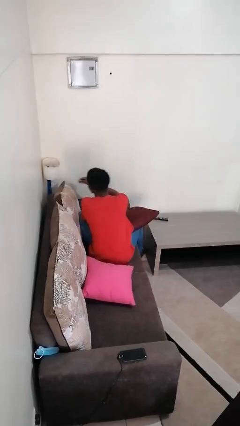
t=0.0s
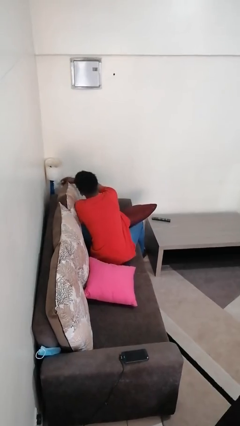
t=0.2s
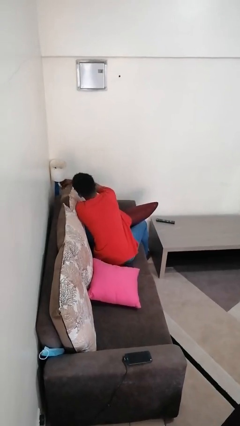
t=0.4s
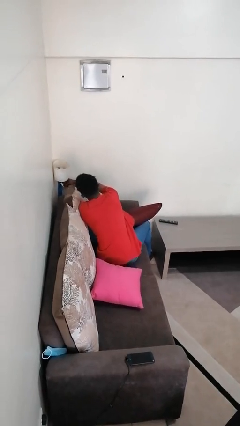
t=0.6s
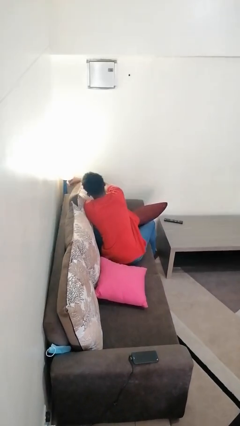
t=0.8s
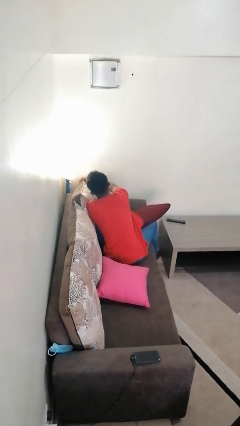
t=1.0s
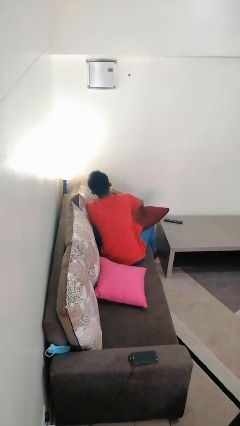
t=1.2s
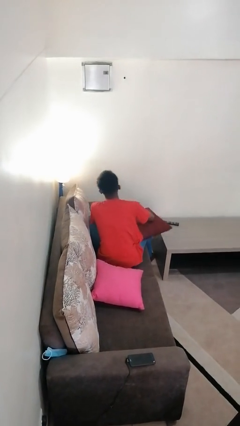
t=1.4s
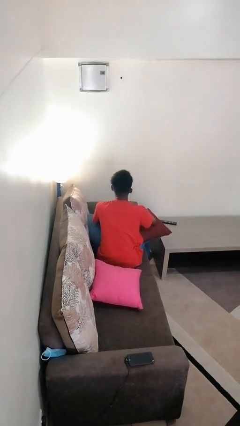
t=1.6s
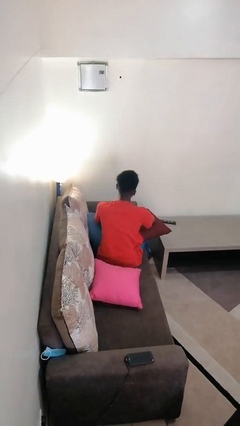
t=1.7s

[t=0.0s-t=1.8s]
person turns on lamp

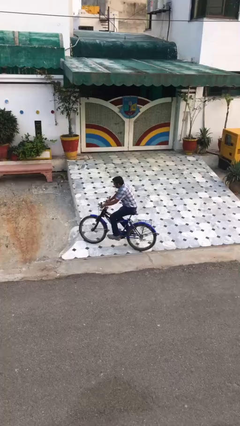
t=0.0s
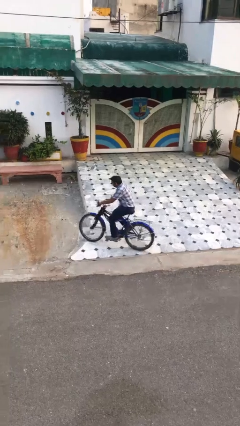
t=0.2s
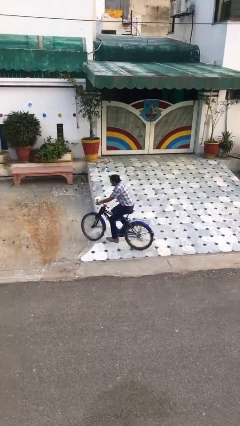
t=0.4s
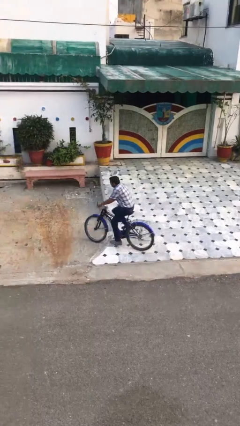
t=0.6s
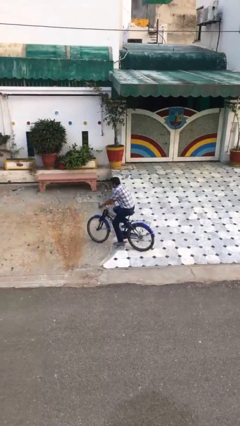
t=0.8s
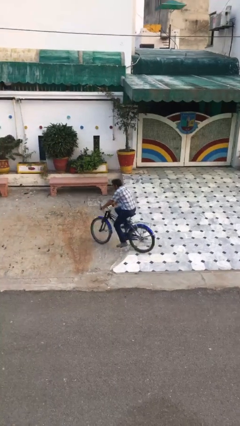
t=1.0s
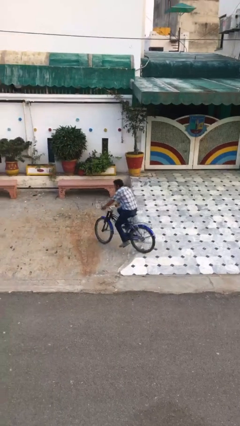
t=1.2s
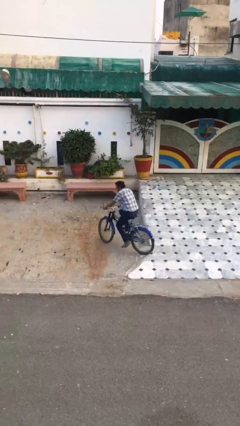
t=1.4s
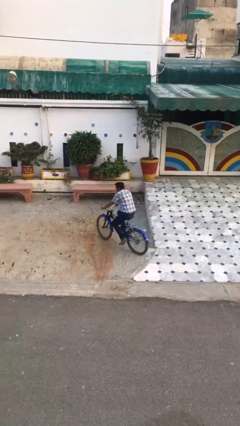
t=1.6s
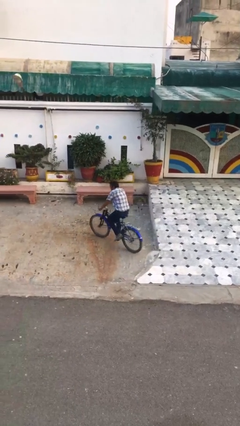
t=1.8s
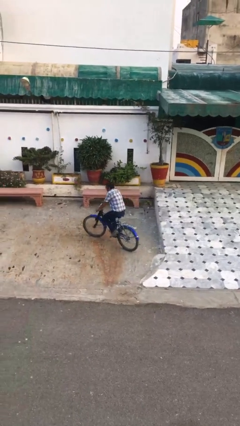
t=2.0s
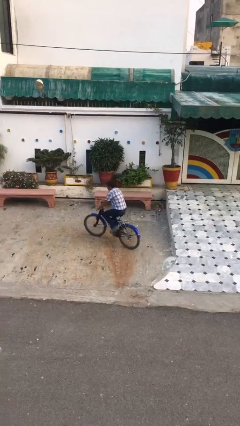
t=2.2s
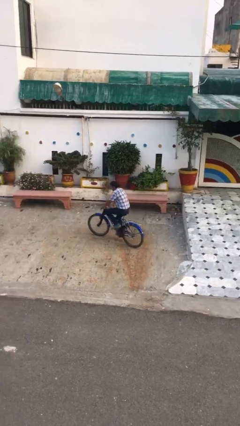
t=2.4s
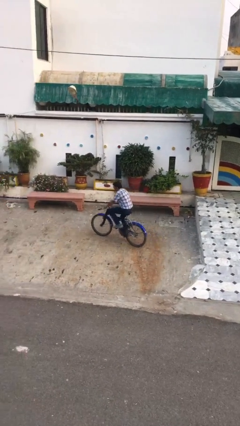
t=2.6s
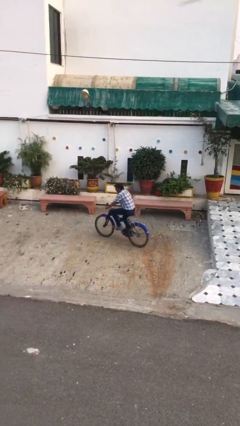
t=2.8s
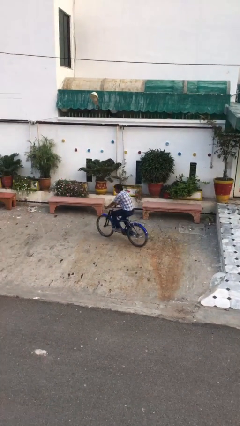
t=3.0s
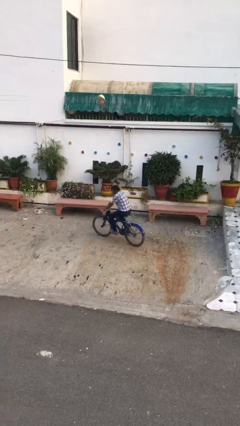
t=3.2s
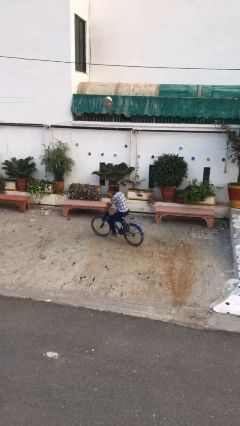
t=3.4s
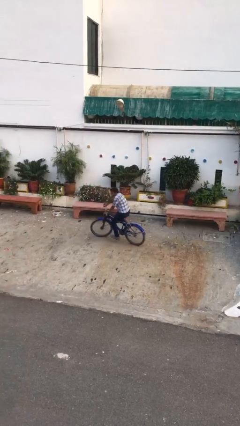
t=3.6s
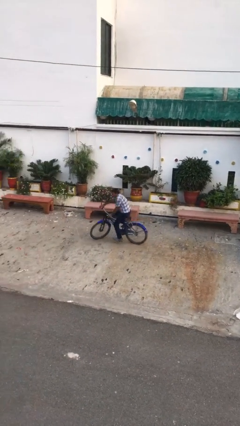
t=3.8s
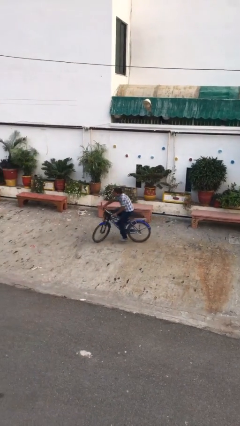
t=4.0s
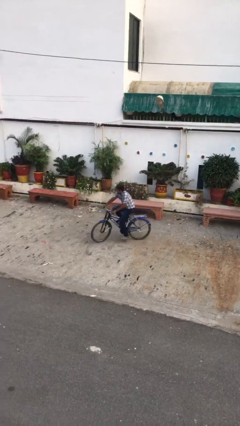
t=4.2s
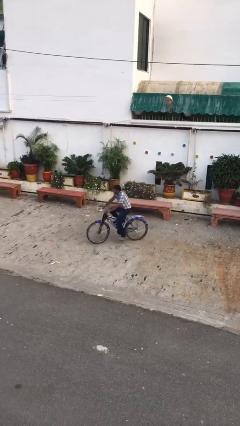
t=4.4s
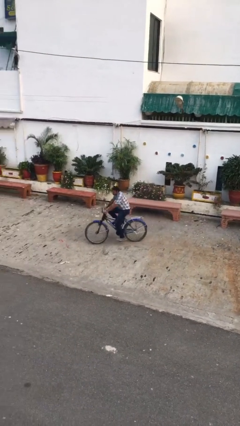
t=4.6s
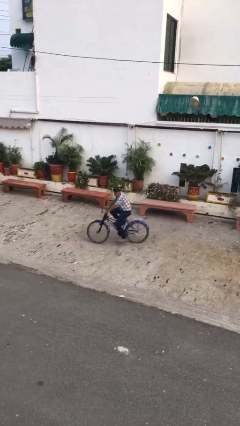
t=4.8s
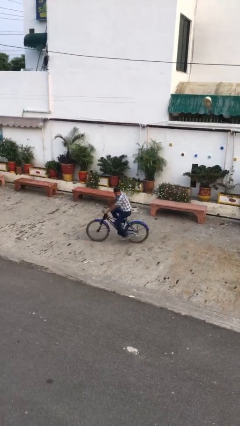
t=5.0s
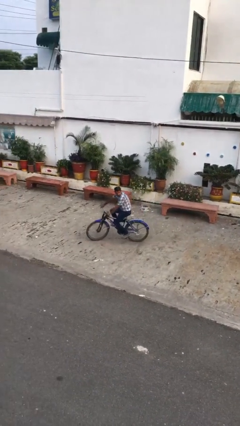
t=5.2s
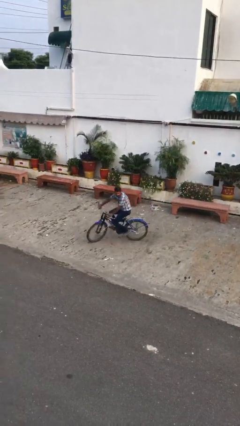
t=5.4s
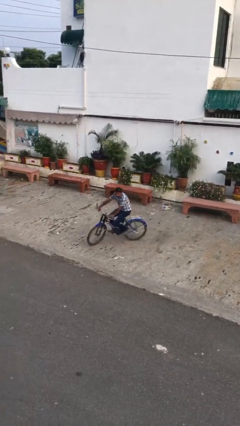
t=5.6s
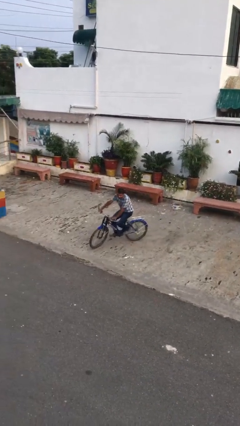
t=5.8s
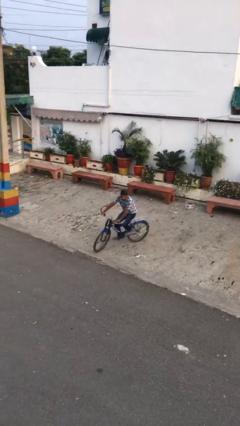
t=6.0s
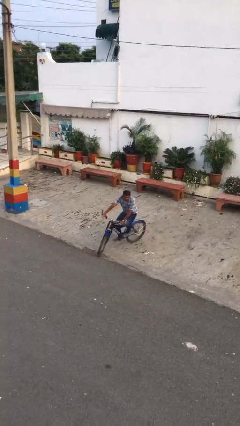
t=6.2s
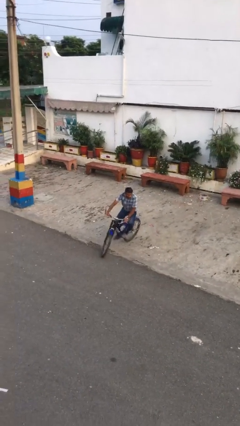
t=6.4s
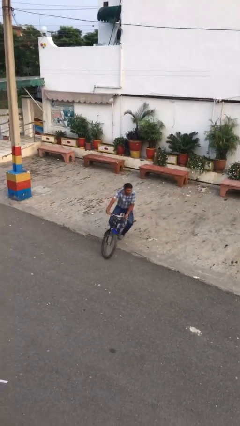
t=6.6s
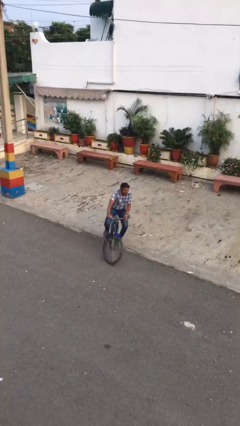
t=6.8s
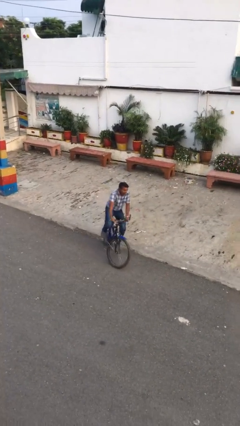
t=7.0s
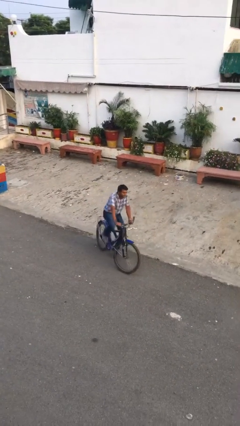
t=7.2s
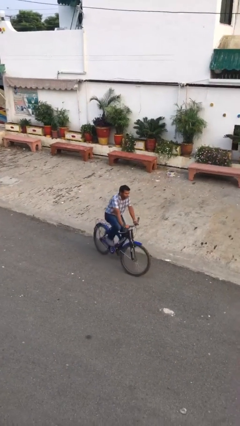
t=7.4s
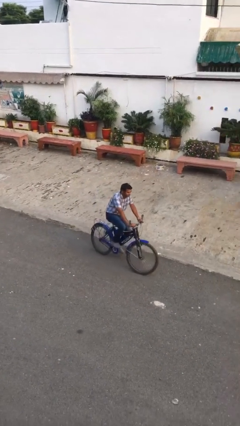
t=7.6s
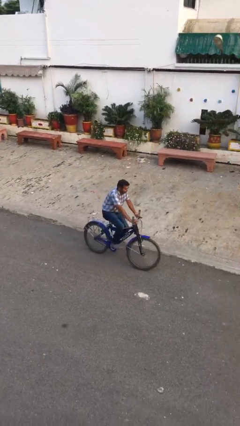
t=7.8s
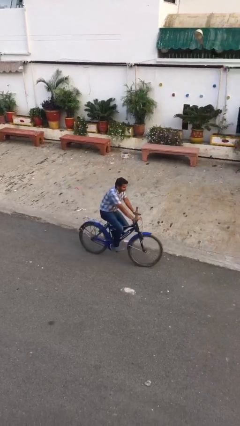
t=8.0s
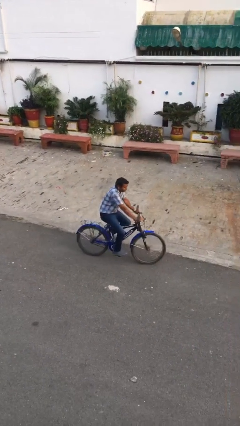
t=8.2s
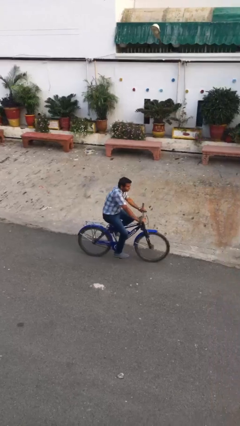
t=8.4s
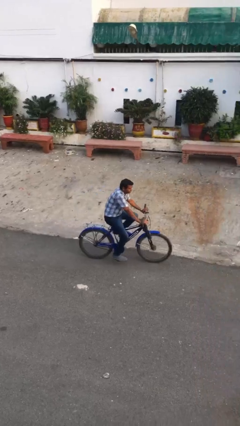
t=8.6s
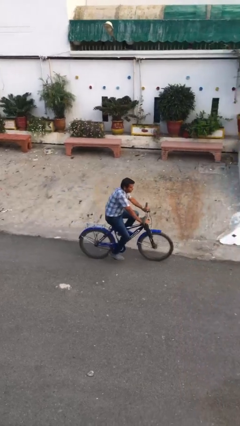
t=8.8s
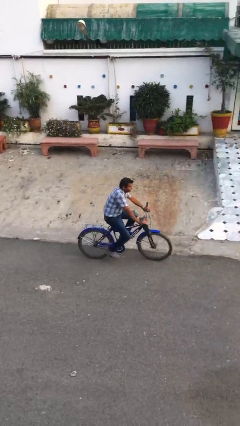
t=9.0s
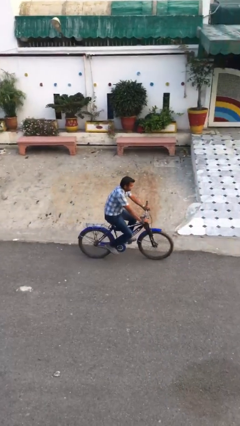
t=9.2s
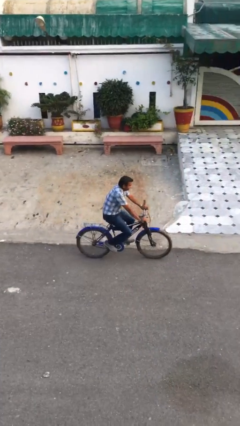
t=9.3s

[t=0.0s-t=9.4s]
person rides bicycle

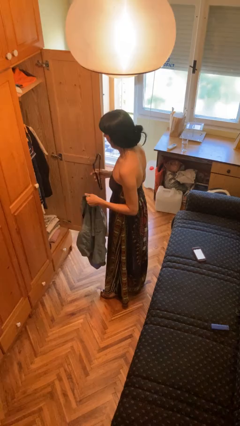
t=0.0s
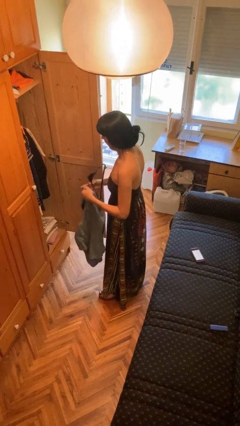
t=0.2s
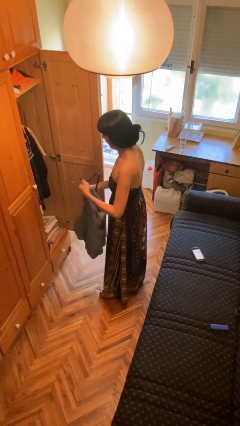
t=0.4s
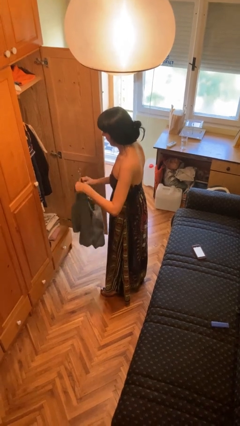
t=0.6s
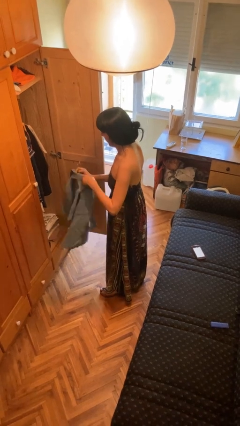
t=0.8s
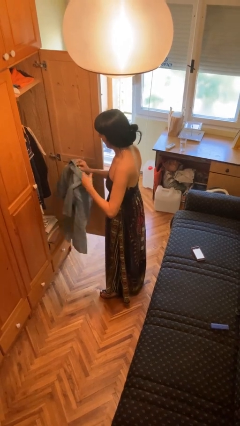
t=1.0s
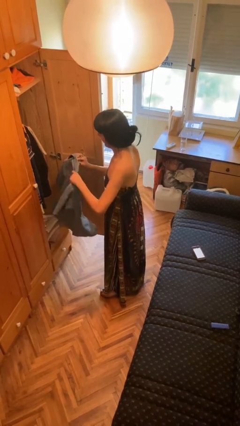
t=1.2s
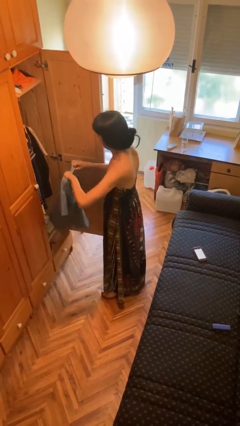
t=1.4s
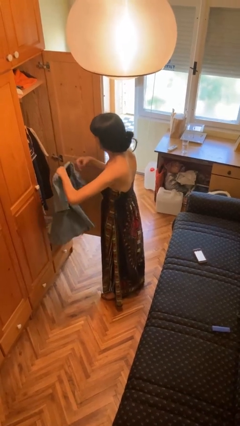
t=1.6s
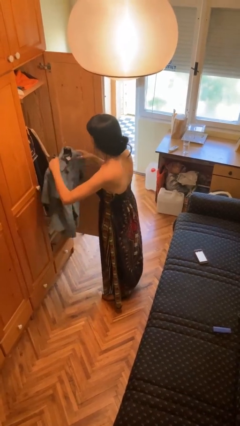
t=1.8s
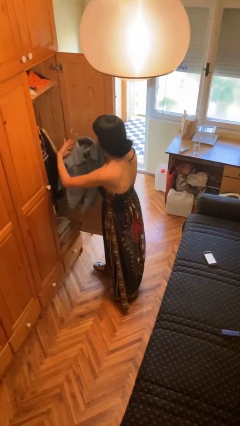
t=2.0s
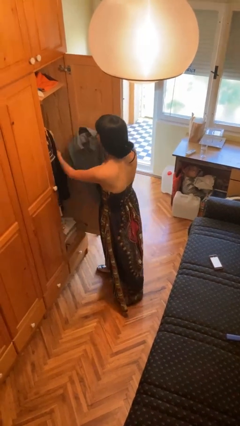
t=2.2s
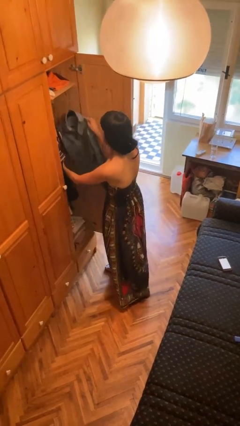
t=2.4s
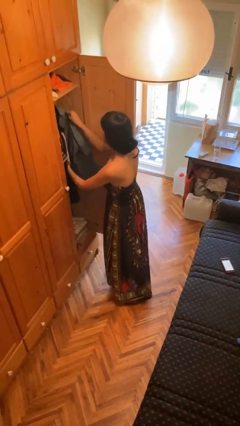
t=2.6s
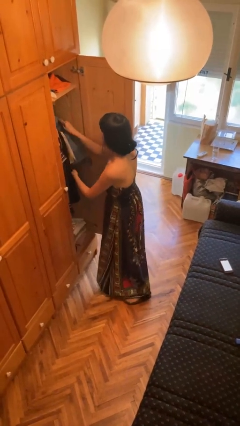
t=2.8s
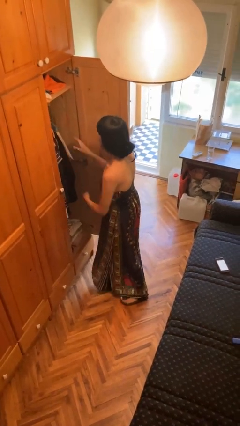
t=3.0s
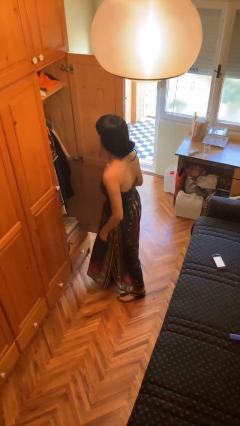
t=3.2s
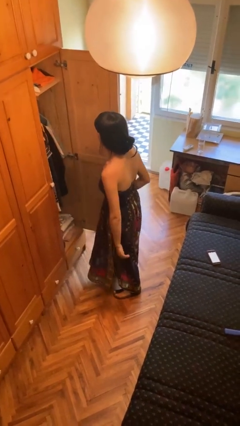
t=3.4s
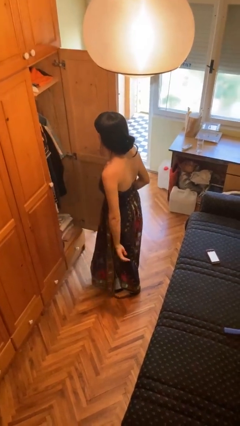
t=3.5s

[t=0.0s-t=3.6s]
person puts clothes into closet

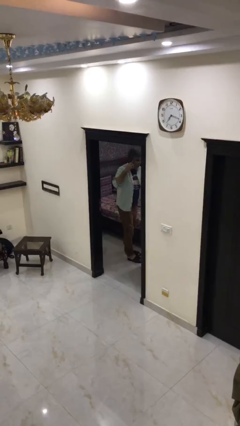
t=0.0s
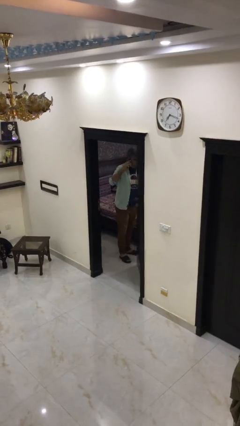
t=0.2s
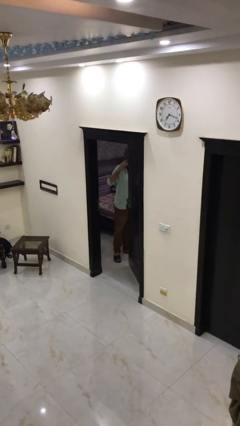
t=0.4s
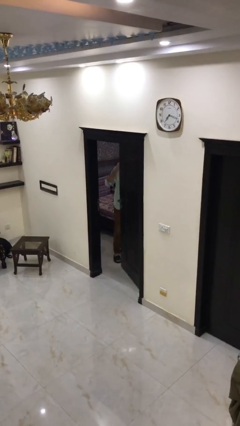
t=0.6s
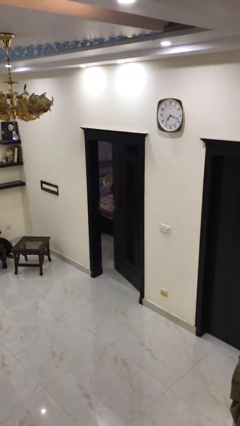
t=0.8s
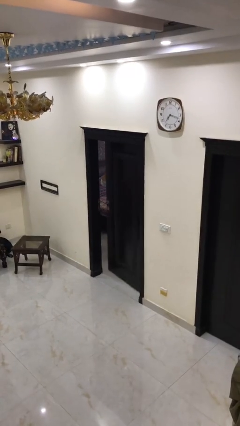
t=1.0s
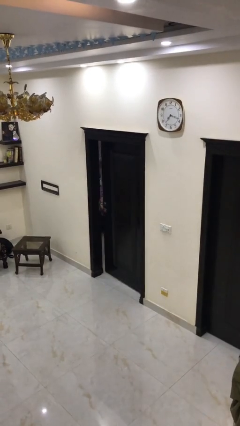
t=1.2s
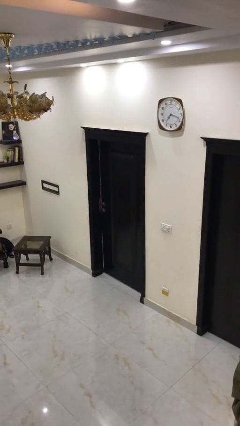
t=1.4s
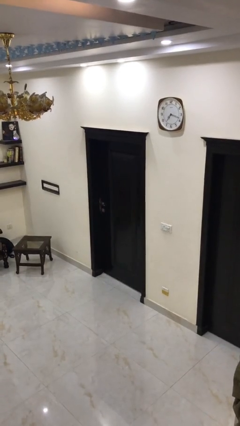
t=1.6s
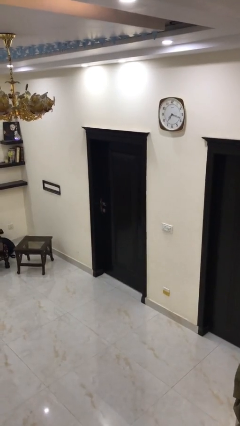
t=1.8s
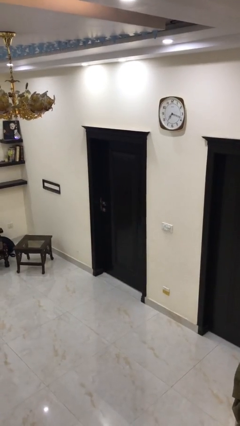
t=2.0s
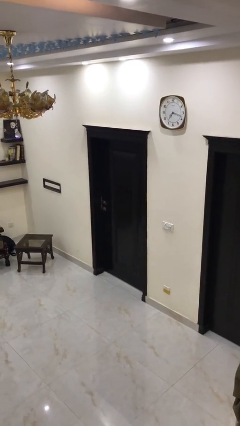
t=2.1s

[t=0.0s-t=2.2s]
person closes facility door

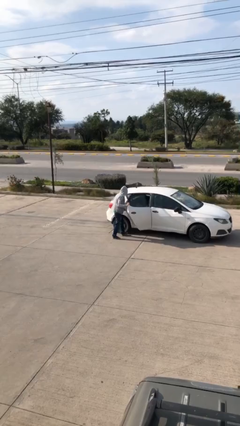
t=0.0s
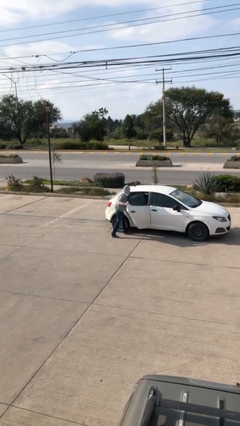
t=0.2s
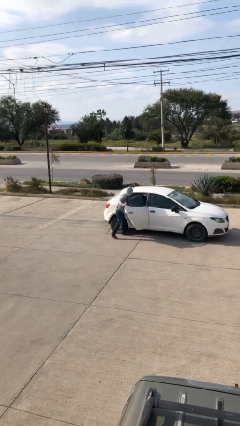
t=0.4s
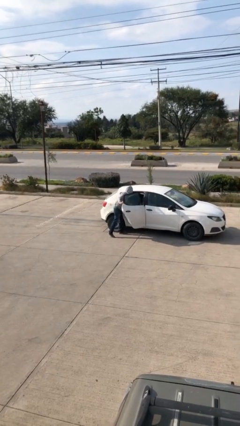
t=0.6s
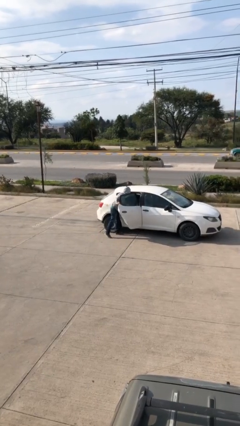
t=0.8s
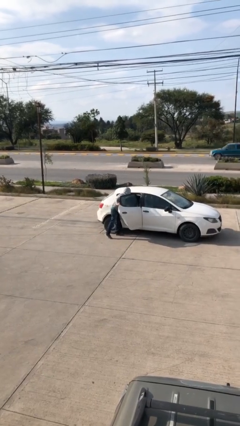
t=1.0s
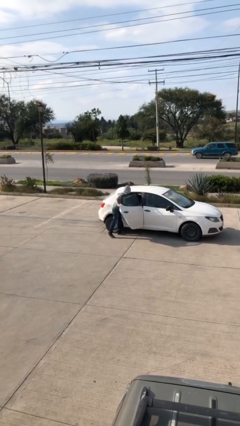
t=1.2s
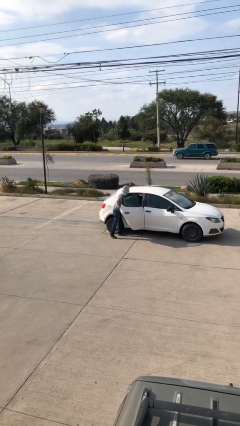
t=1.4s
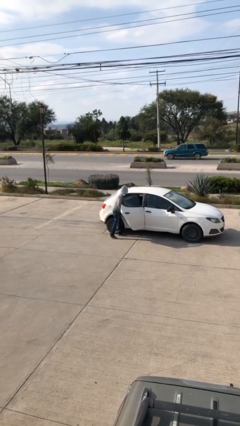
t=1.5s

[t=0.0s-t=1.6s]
person unloads car
